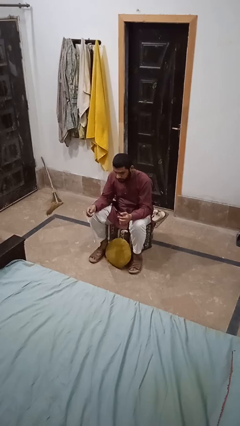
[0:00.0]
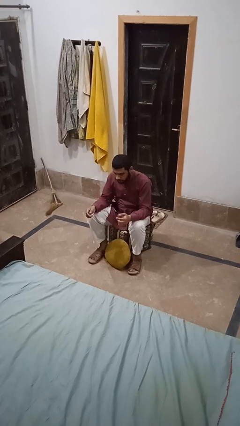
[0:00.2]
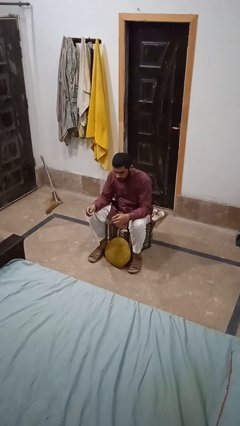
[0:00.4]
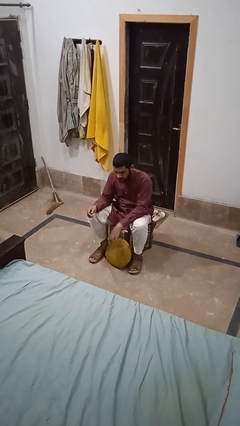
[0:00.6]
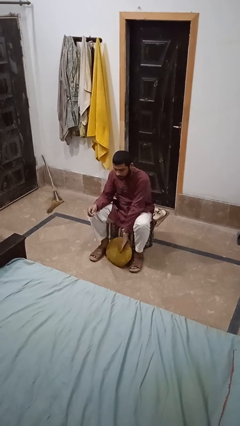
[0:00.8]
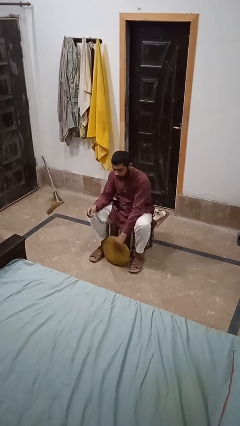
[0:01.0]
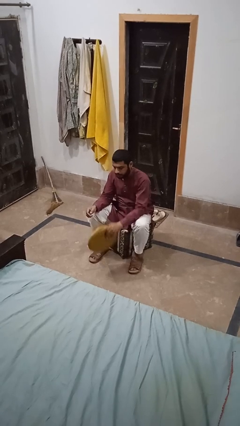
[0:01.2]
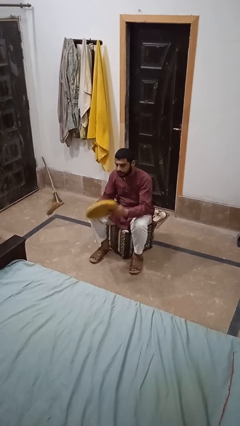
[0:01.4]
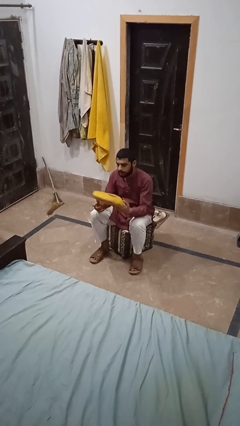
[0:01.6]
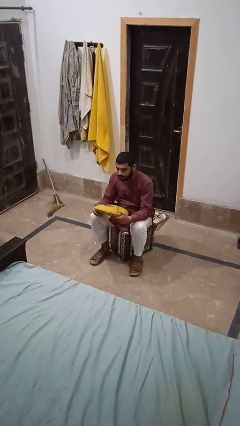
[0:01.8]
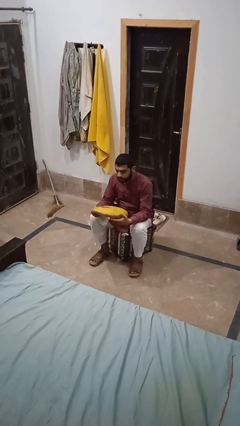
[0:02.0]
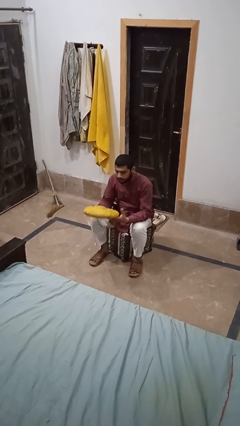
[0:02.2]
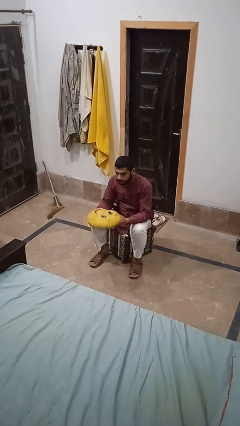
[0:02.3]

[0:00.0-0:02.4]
person picks up object from floor

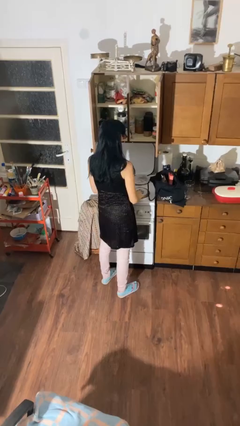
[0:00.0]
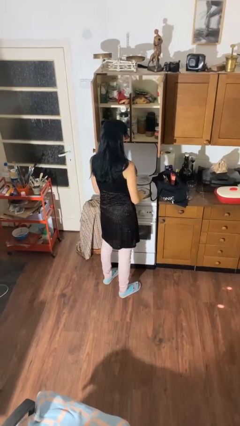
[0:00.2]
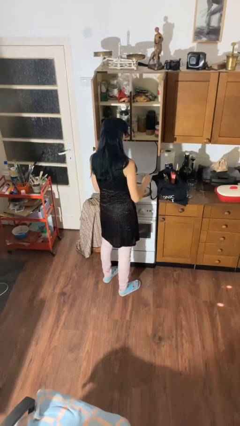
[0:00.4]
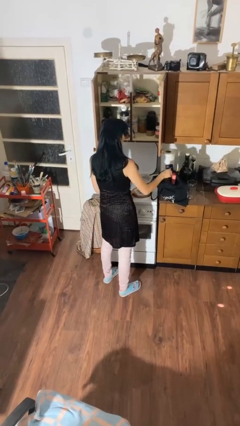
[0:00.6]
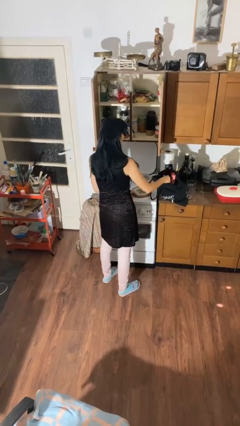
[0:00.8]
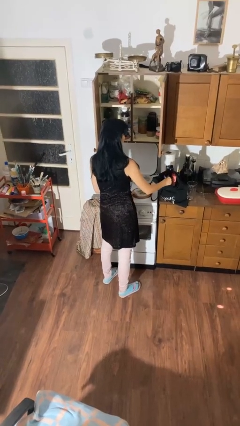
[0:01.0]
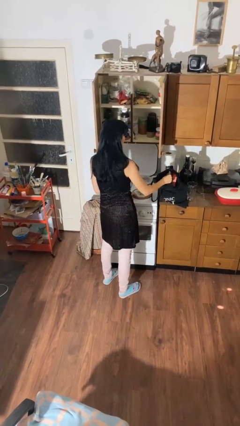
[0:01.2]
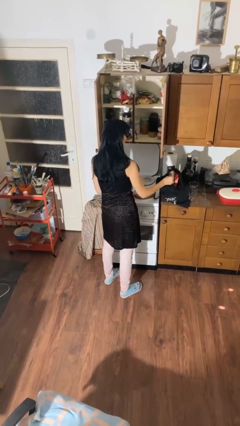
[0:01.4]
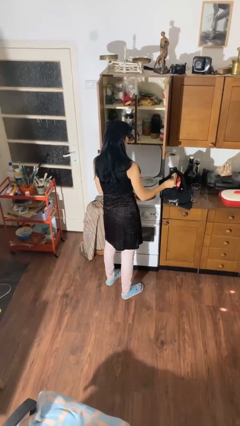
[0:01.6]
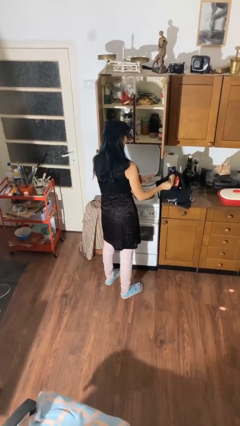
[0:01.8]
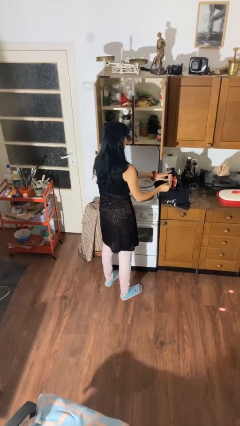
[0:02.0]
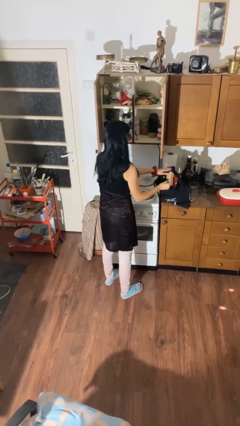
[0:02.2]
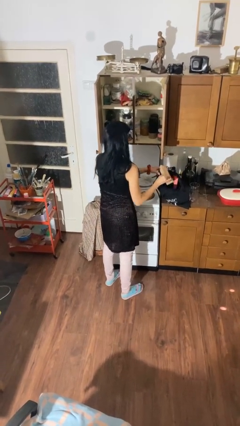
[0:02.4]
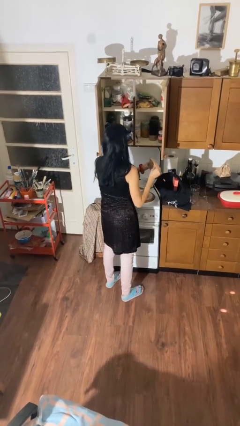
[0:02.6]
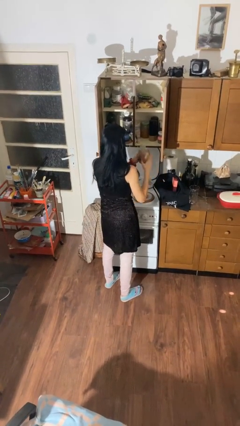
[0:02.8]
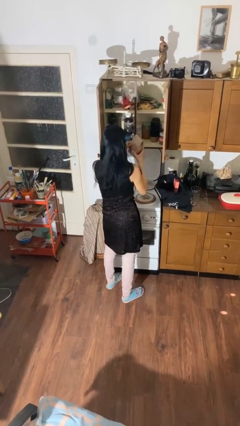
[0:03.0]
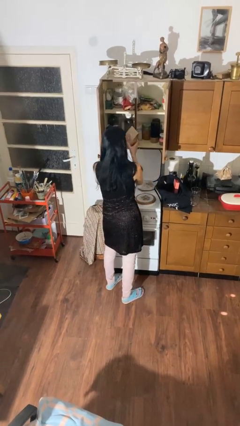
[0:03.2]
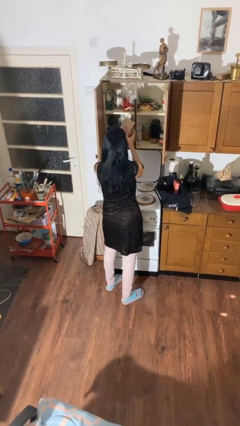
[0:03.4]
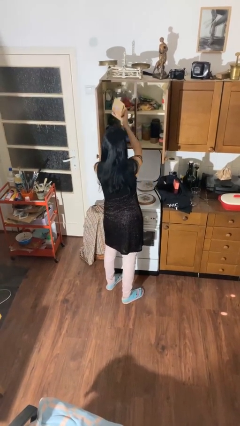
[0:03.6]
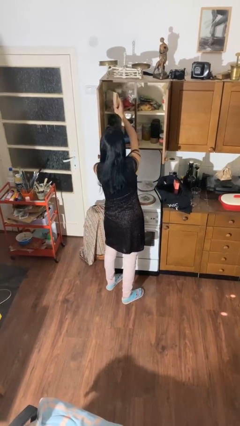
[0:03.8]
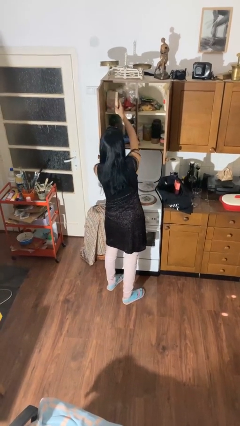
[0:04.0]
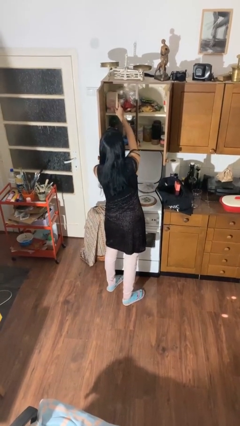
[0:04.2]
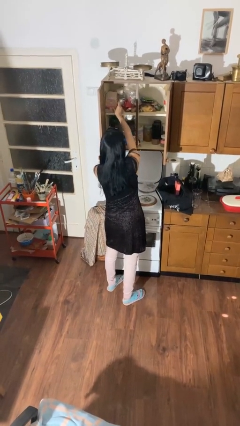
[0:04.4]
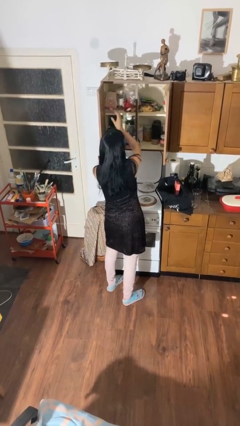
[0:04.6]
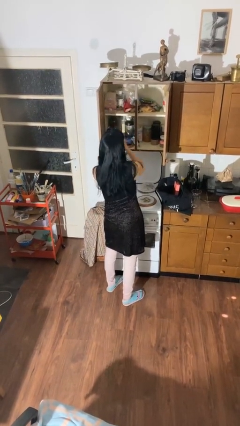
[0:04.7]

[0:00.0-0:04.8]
person loads groceries into cabinet

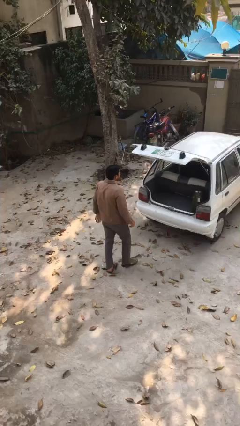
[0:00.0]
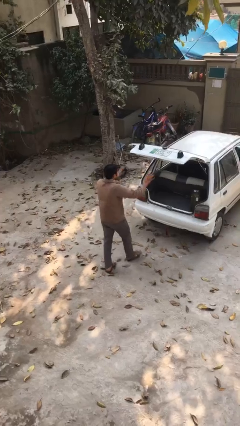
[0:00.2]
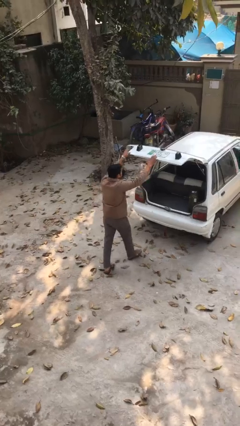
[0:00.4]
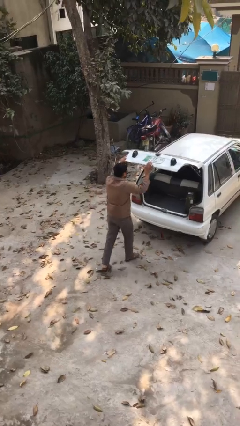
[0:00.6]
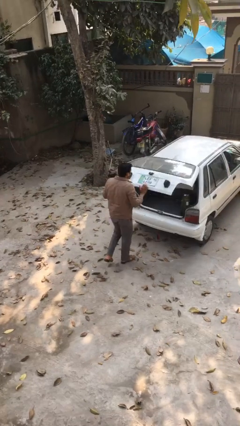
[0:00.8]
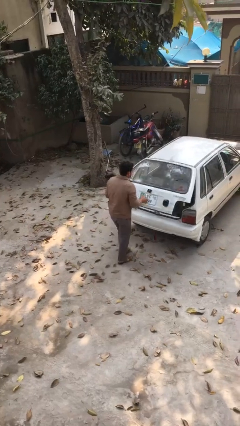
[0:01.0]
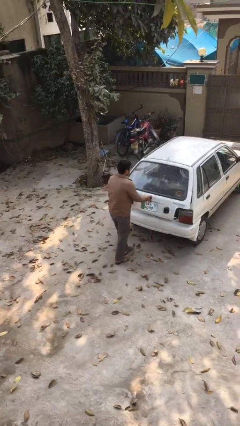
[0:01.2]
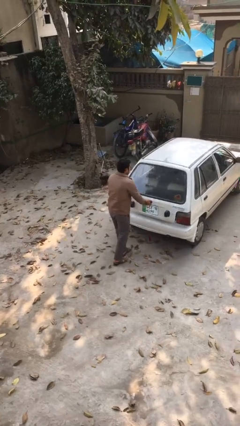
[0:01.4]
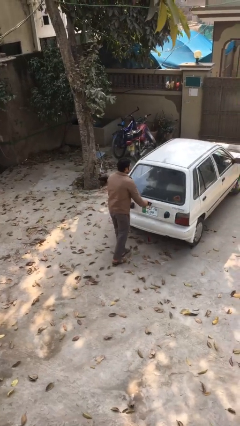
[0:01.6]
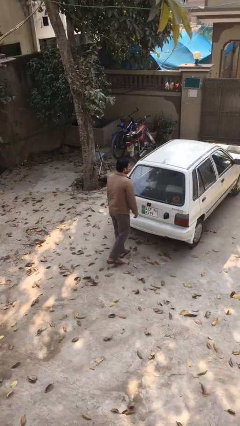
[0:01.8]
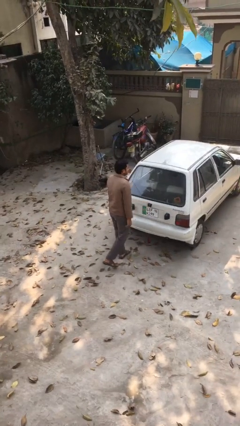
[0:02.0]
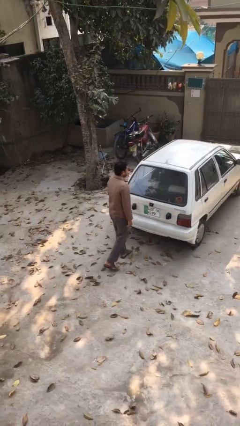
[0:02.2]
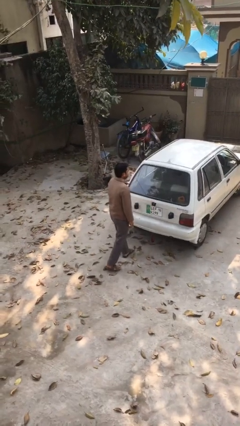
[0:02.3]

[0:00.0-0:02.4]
person closes car trunk

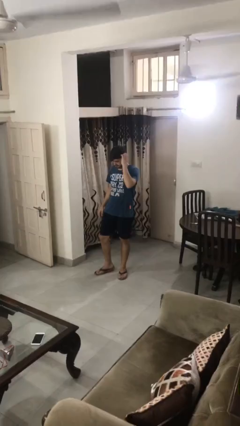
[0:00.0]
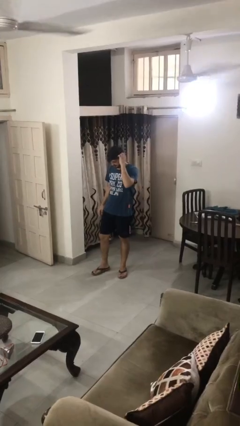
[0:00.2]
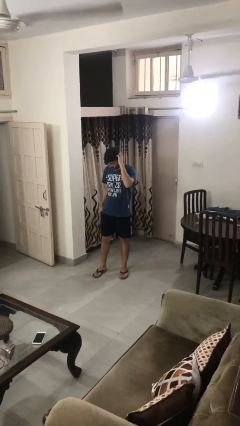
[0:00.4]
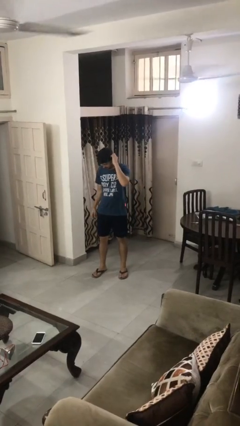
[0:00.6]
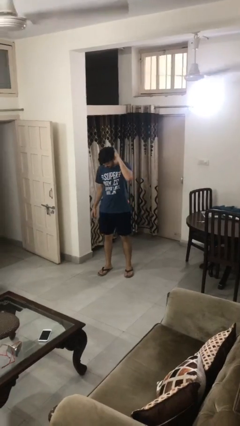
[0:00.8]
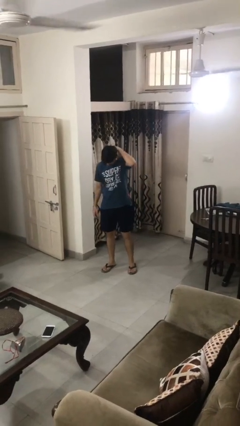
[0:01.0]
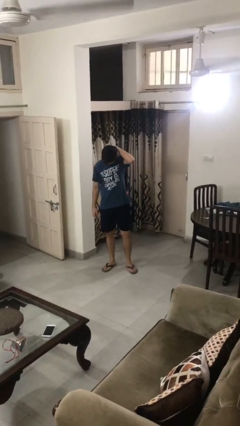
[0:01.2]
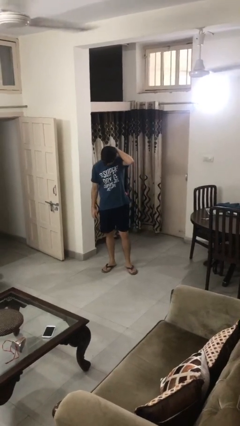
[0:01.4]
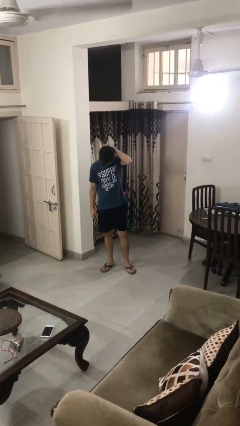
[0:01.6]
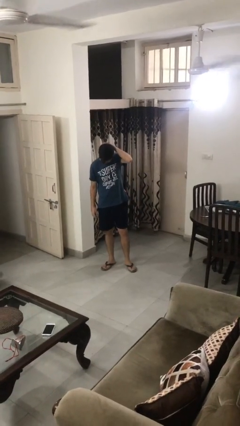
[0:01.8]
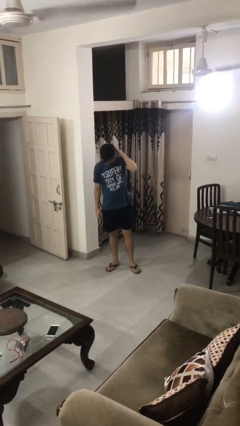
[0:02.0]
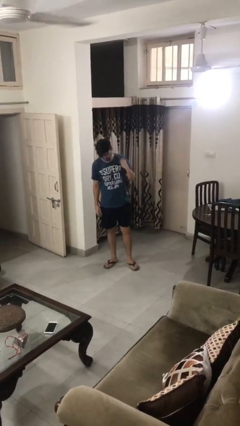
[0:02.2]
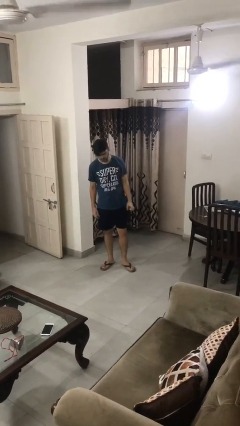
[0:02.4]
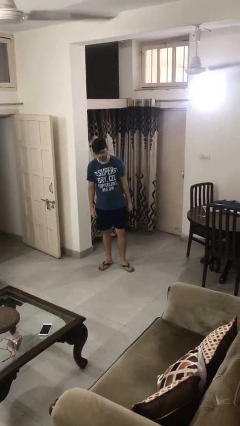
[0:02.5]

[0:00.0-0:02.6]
person scratches face

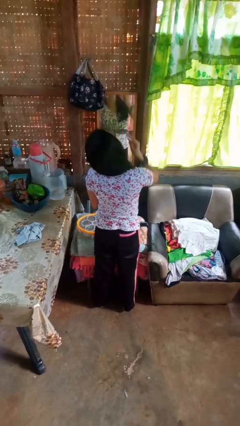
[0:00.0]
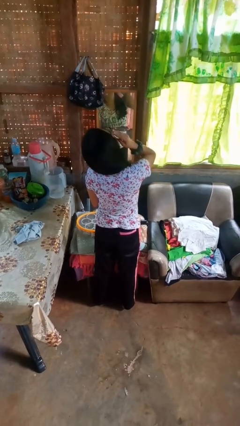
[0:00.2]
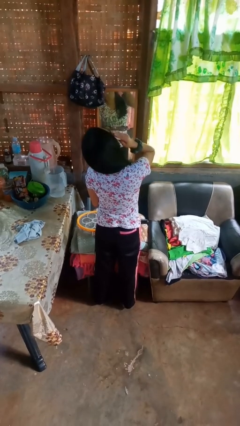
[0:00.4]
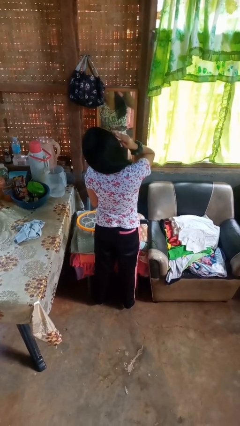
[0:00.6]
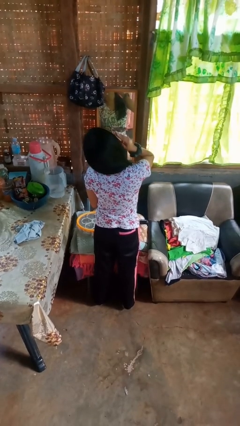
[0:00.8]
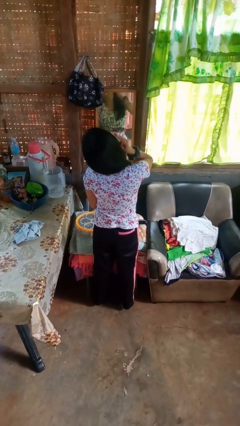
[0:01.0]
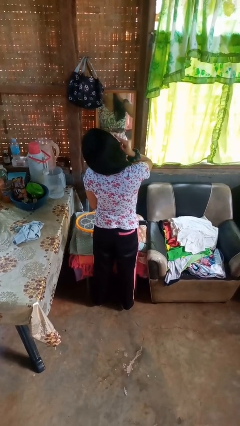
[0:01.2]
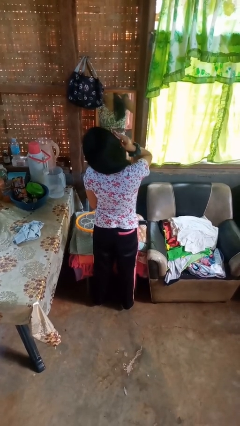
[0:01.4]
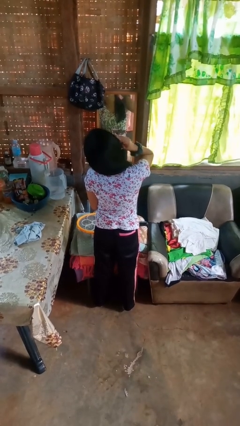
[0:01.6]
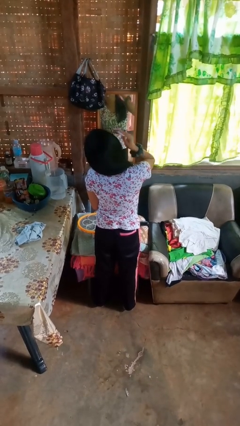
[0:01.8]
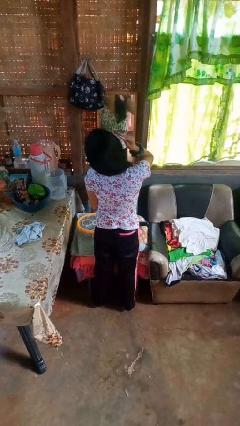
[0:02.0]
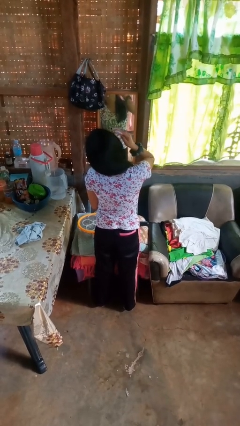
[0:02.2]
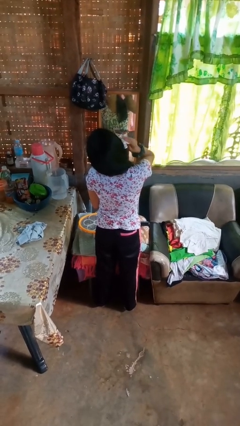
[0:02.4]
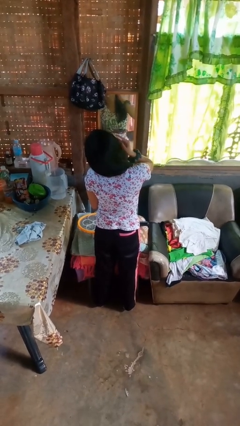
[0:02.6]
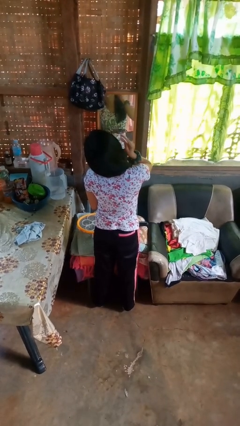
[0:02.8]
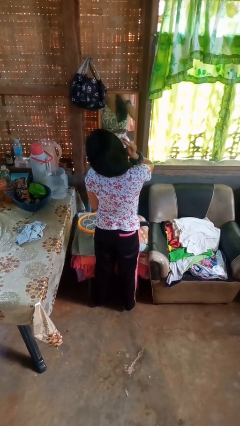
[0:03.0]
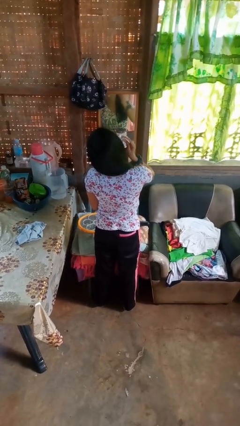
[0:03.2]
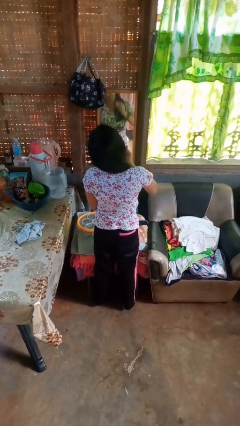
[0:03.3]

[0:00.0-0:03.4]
person applies foundation makeup

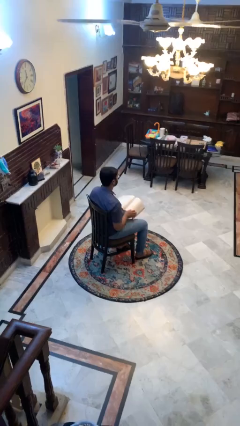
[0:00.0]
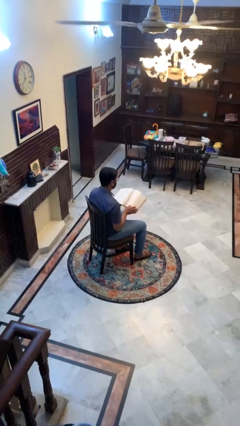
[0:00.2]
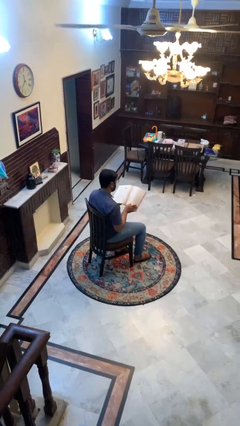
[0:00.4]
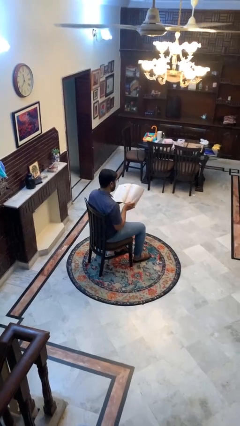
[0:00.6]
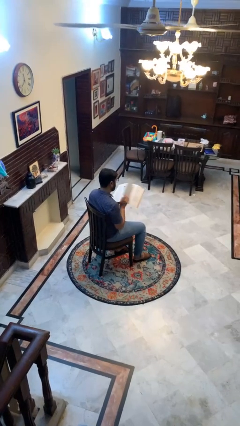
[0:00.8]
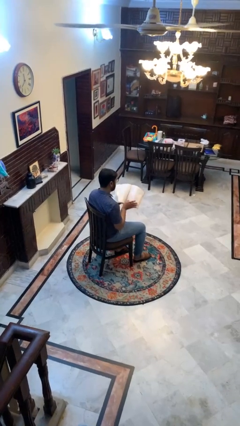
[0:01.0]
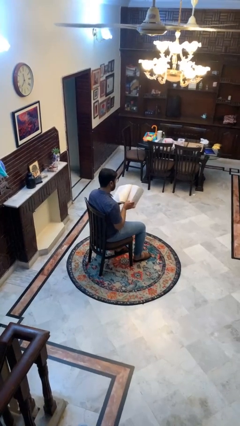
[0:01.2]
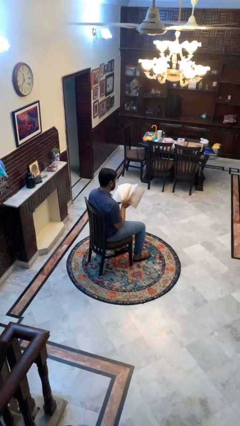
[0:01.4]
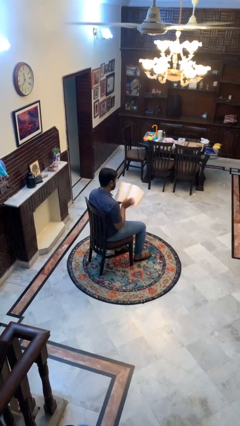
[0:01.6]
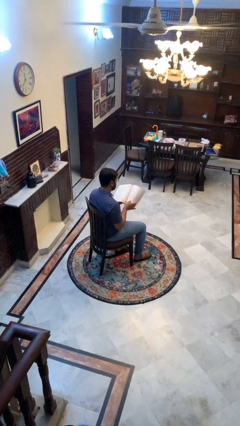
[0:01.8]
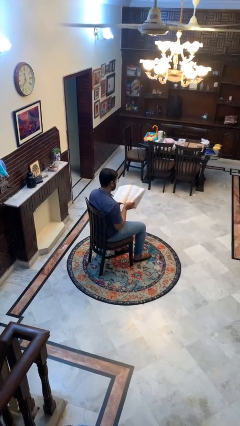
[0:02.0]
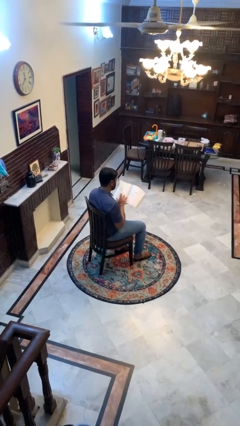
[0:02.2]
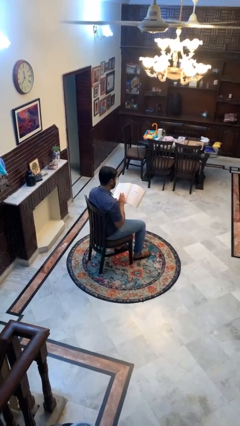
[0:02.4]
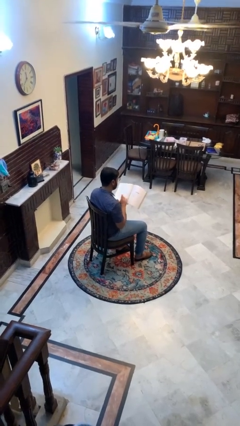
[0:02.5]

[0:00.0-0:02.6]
person reads book
